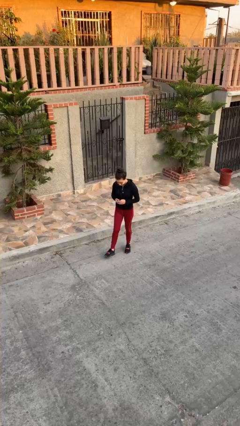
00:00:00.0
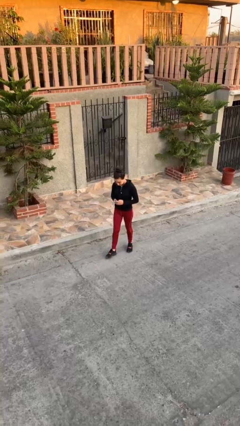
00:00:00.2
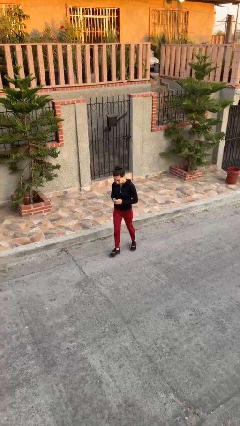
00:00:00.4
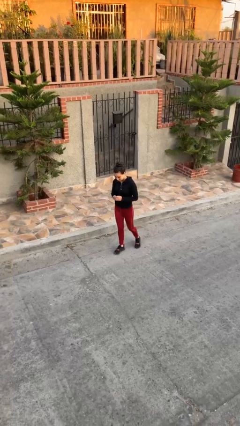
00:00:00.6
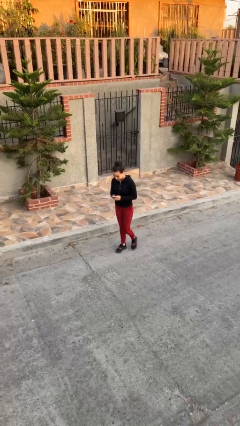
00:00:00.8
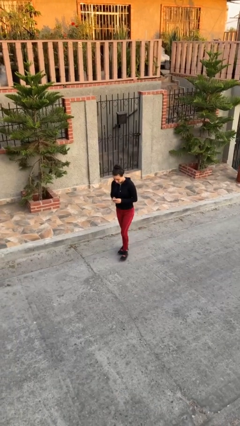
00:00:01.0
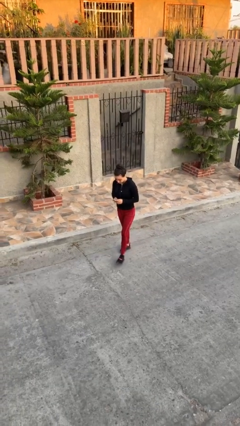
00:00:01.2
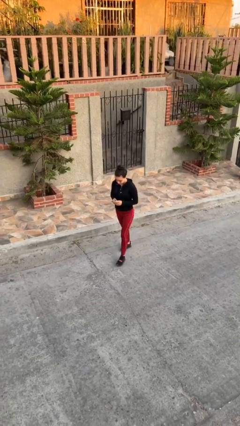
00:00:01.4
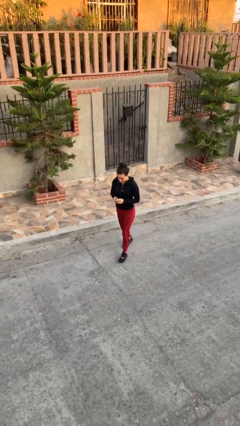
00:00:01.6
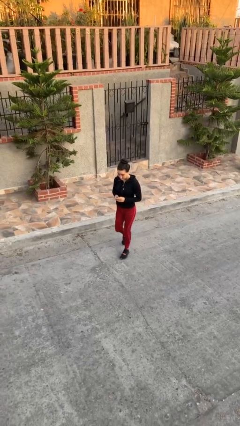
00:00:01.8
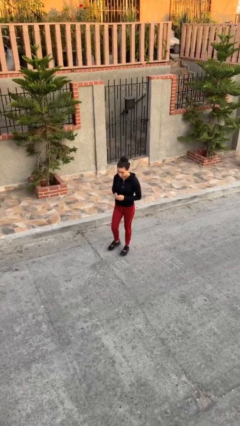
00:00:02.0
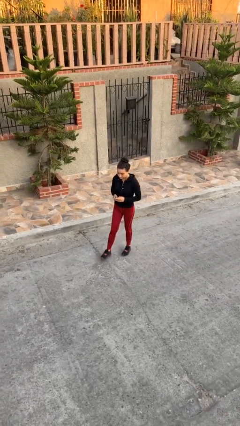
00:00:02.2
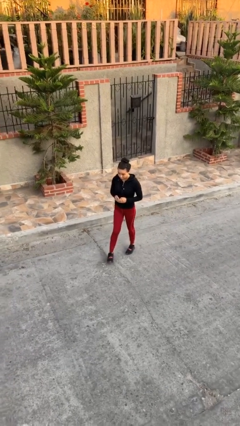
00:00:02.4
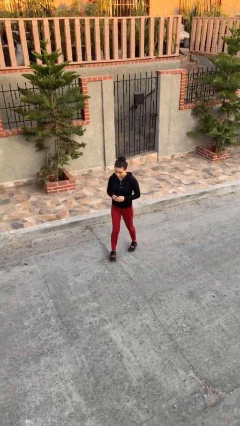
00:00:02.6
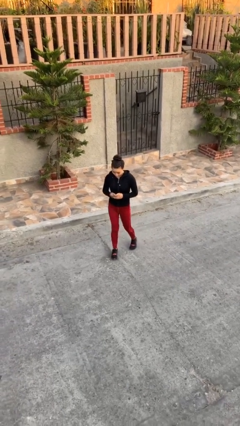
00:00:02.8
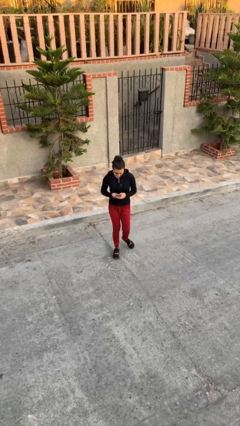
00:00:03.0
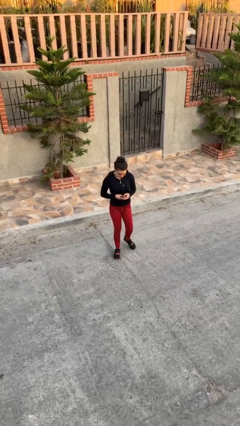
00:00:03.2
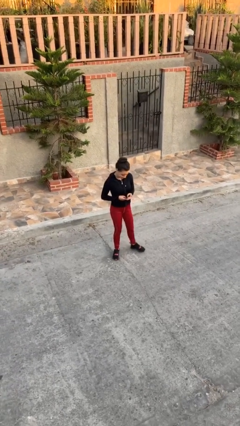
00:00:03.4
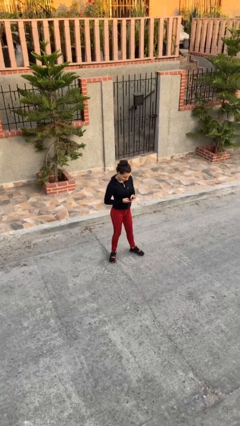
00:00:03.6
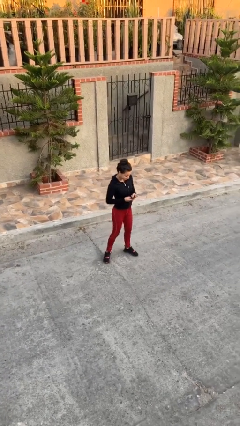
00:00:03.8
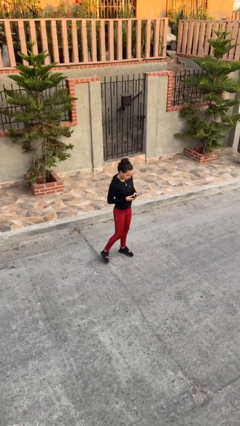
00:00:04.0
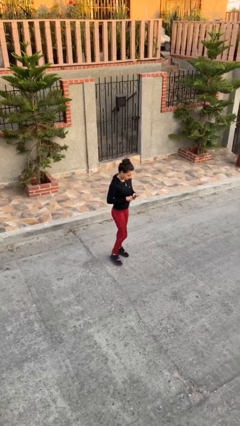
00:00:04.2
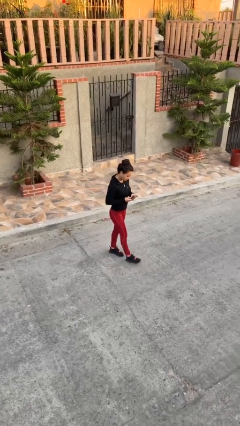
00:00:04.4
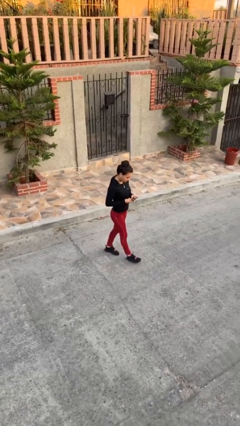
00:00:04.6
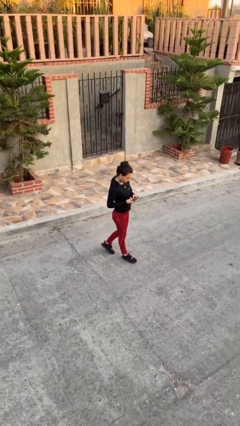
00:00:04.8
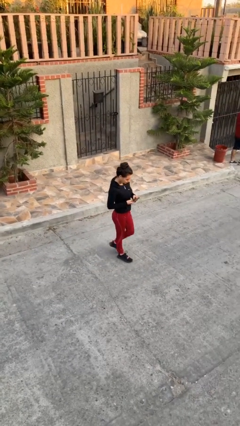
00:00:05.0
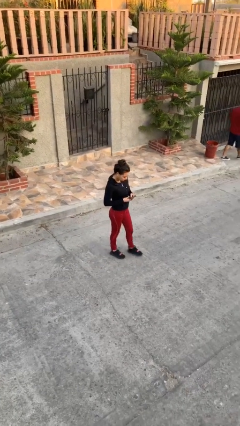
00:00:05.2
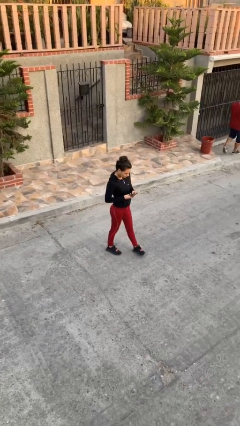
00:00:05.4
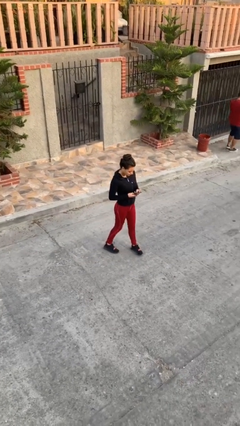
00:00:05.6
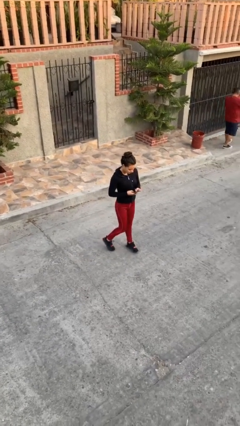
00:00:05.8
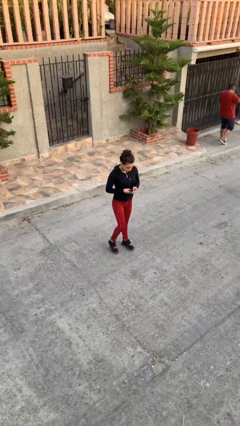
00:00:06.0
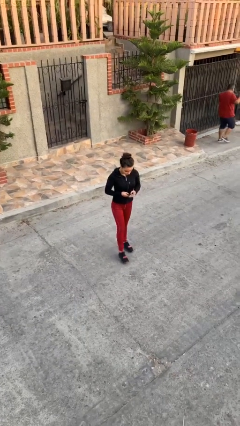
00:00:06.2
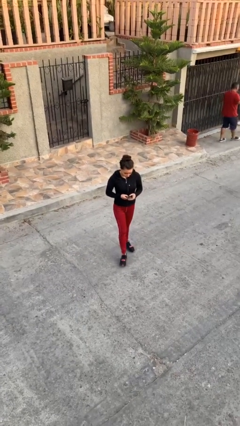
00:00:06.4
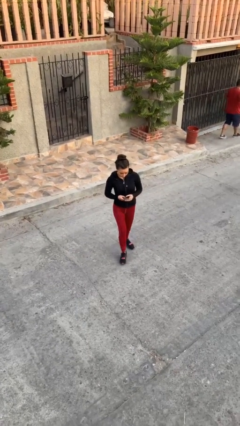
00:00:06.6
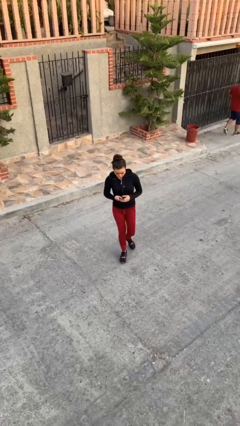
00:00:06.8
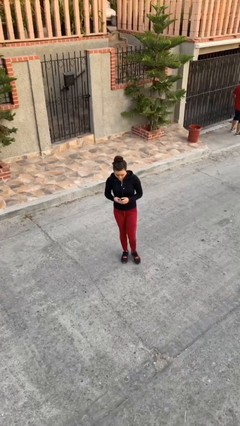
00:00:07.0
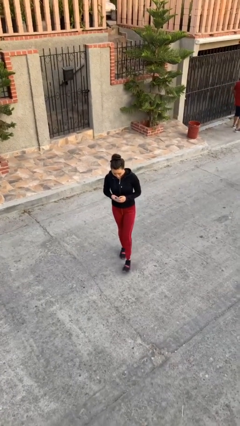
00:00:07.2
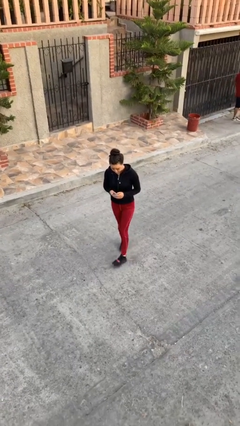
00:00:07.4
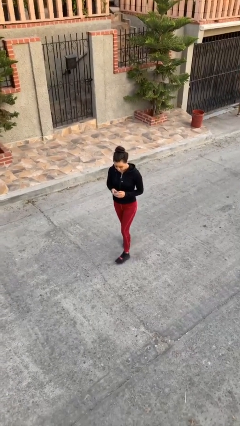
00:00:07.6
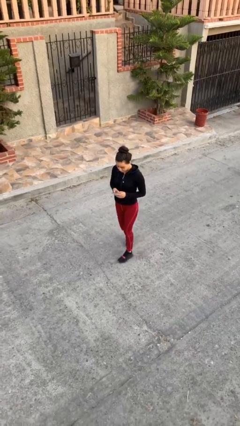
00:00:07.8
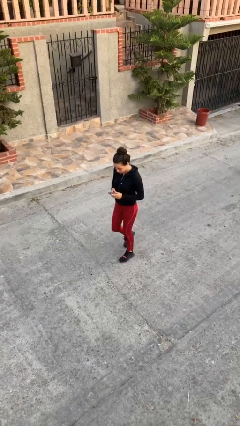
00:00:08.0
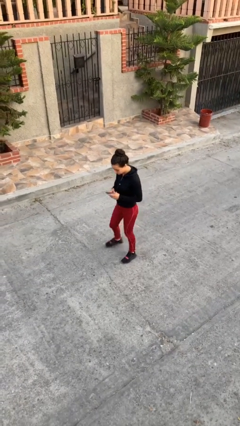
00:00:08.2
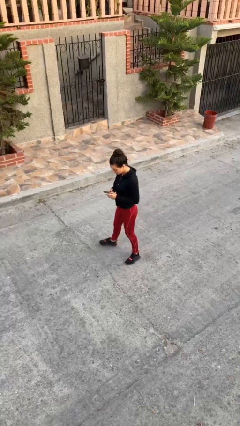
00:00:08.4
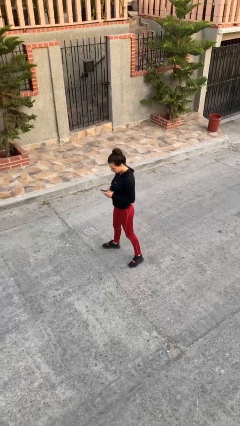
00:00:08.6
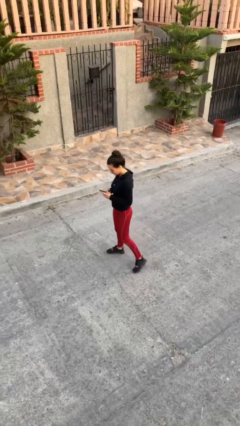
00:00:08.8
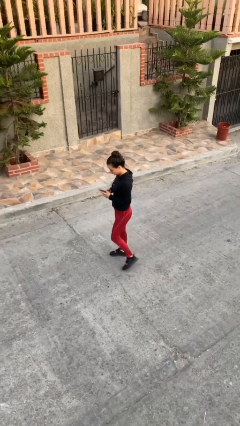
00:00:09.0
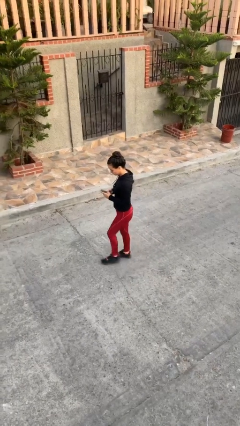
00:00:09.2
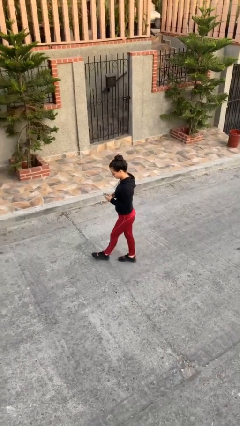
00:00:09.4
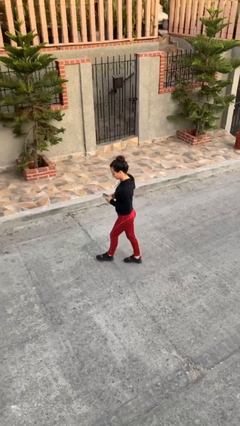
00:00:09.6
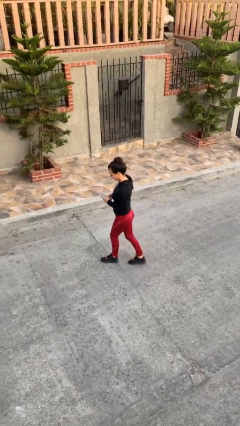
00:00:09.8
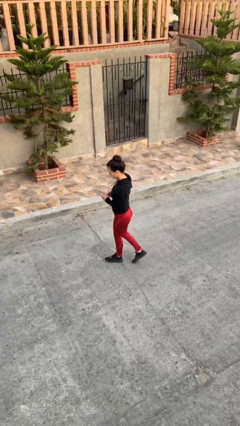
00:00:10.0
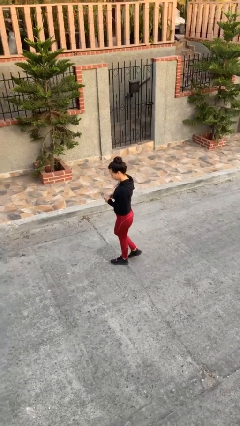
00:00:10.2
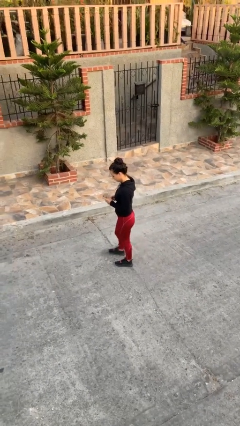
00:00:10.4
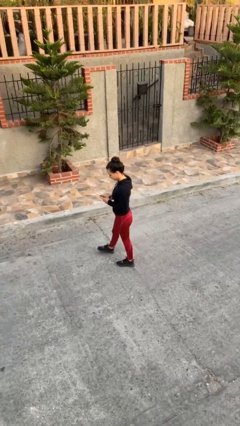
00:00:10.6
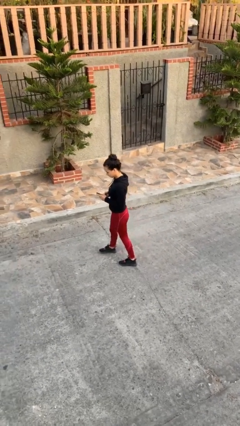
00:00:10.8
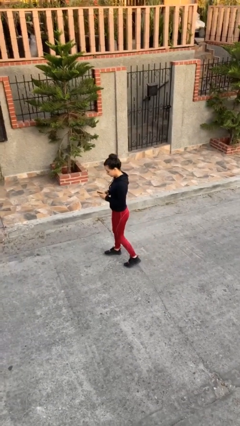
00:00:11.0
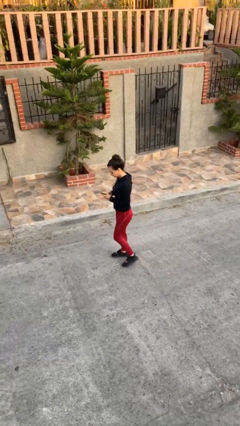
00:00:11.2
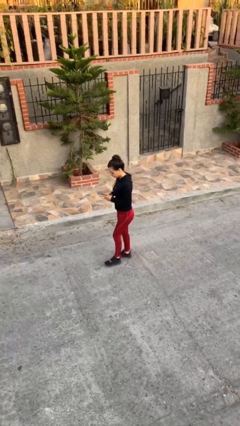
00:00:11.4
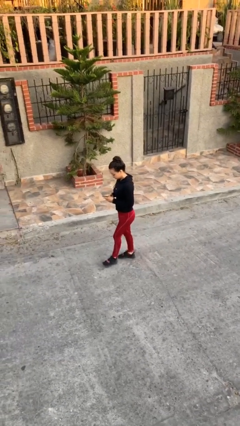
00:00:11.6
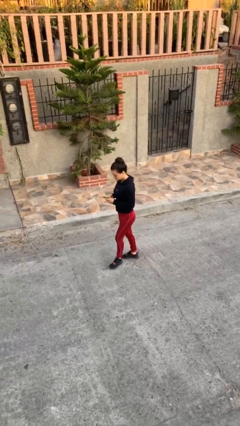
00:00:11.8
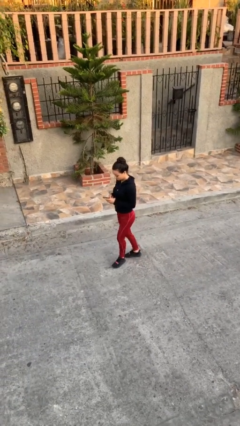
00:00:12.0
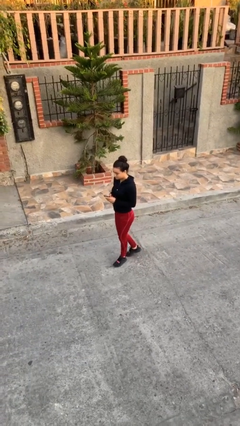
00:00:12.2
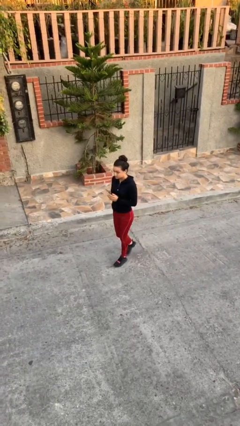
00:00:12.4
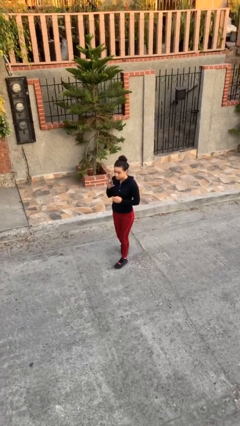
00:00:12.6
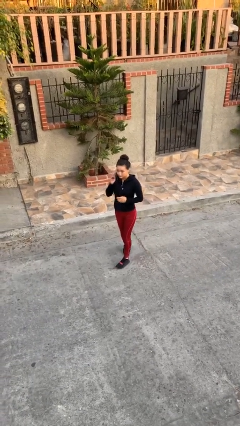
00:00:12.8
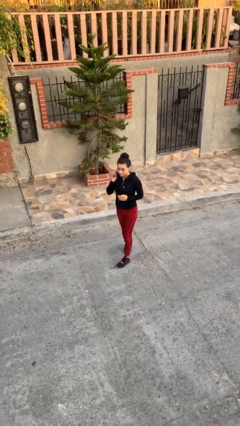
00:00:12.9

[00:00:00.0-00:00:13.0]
person texts on phone

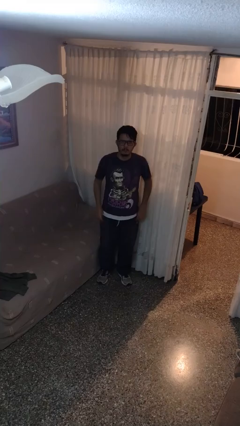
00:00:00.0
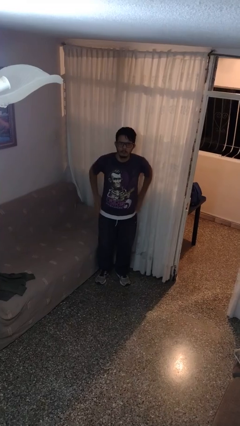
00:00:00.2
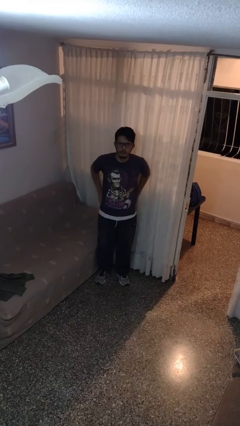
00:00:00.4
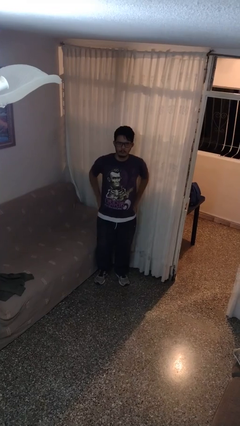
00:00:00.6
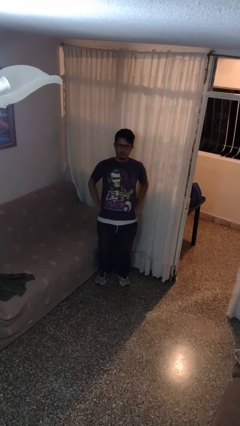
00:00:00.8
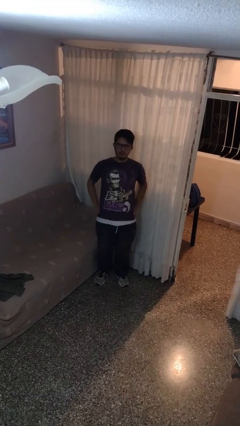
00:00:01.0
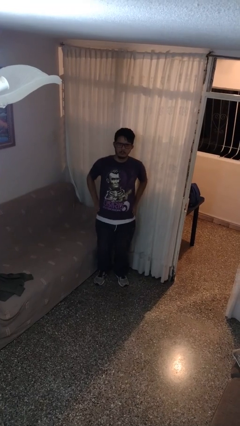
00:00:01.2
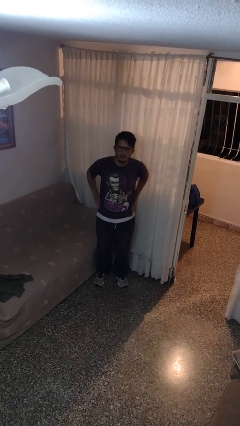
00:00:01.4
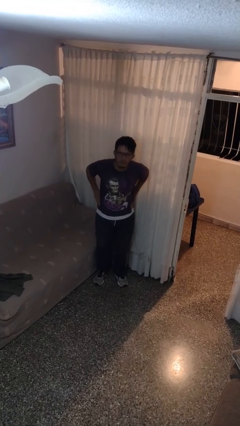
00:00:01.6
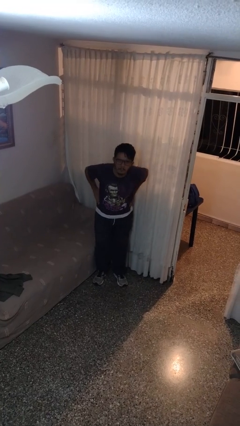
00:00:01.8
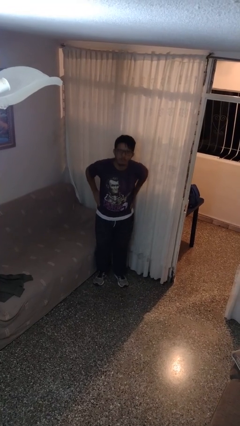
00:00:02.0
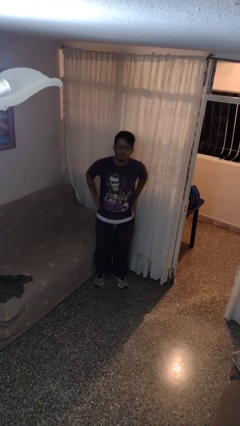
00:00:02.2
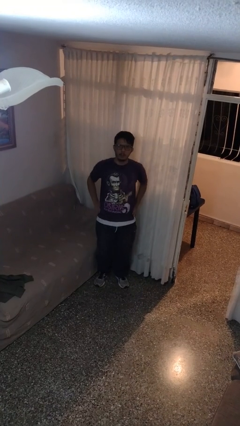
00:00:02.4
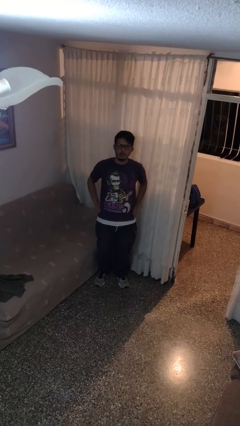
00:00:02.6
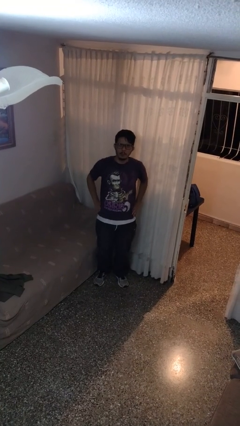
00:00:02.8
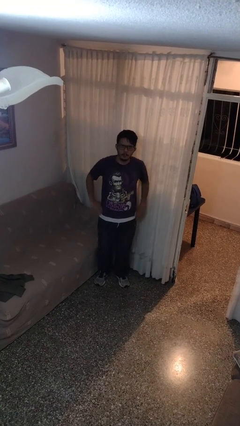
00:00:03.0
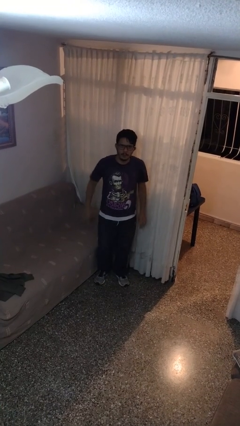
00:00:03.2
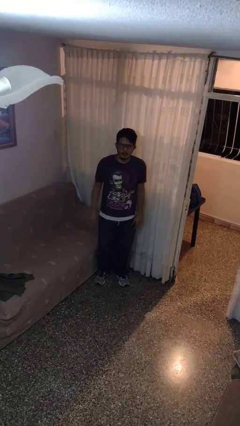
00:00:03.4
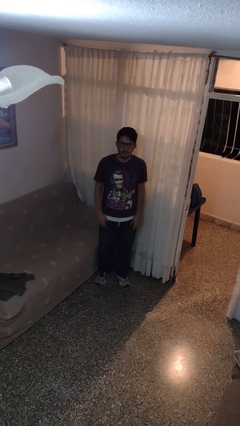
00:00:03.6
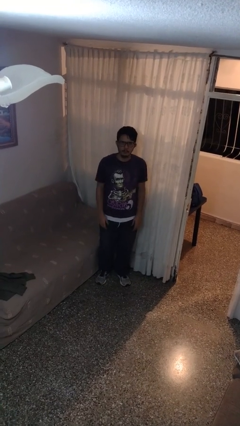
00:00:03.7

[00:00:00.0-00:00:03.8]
person wiggles hips

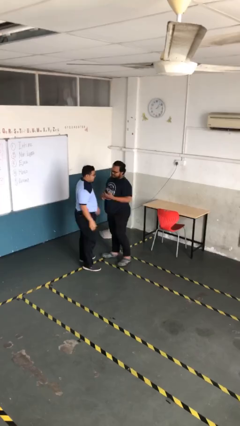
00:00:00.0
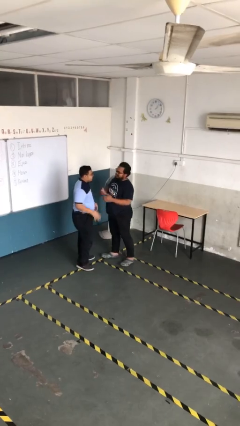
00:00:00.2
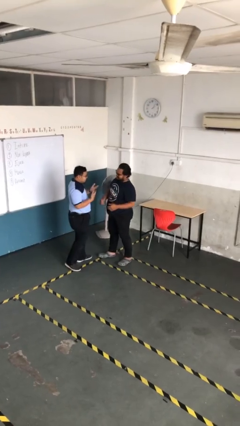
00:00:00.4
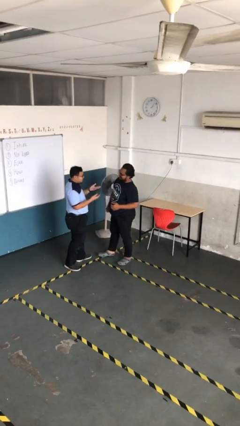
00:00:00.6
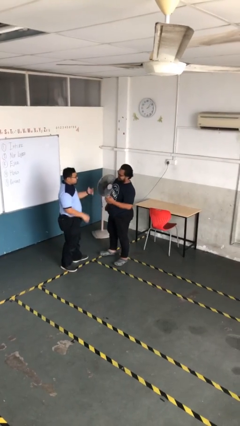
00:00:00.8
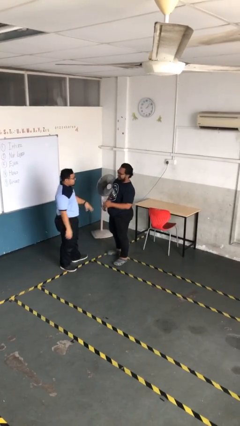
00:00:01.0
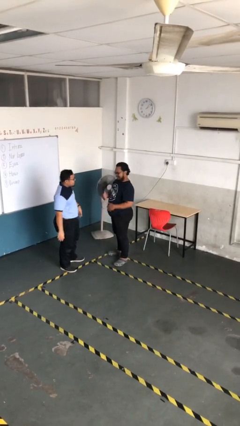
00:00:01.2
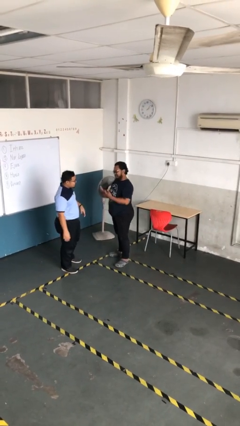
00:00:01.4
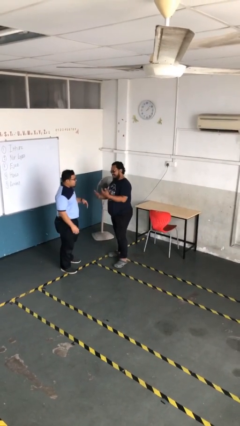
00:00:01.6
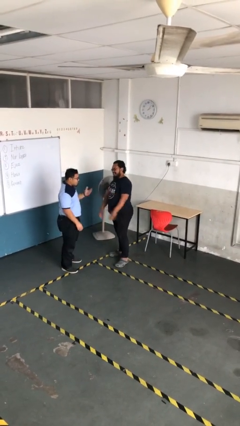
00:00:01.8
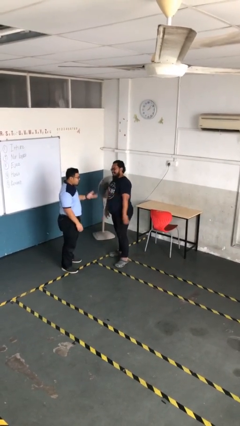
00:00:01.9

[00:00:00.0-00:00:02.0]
person talks to person
